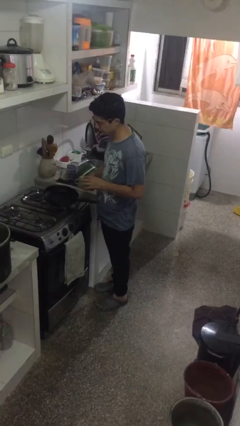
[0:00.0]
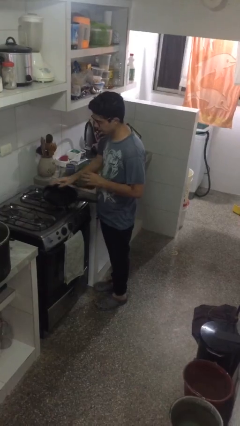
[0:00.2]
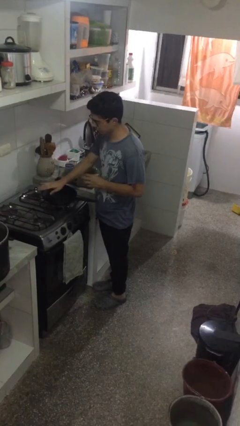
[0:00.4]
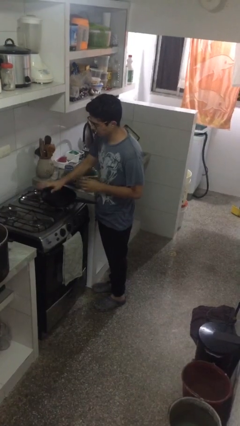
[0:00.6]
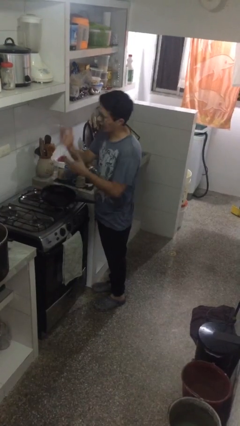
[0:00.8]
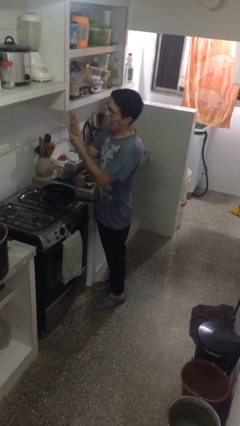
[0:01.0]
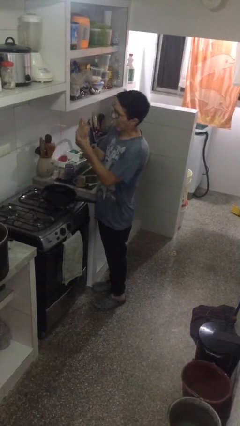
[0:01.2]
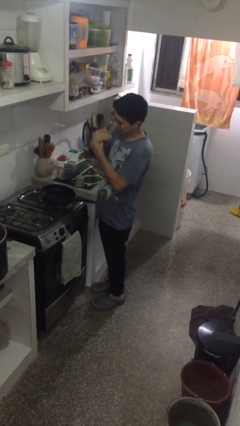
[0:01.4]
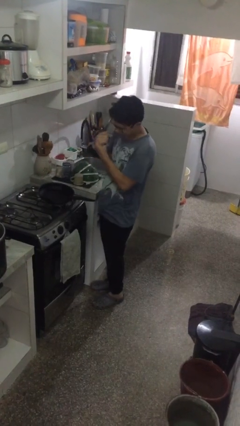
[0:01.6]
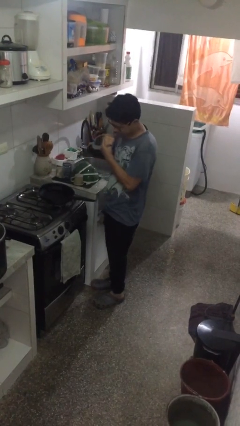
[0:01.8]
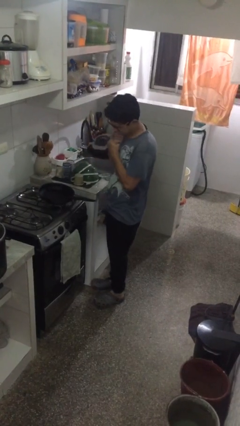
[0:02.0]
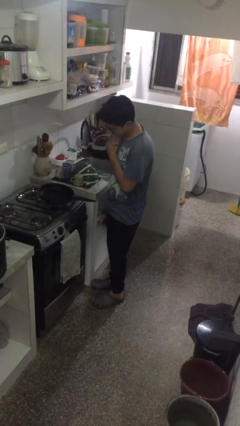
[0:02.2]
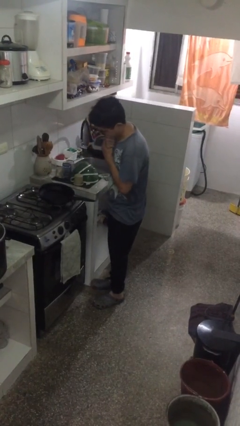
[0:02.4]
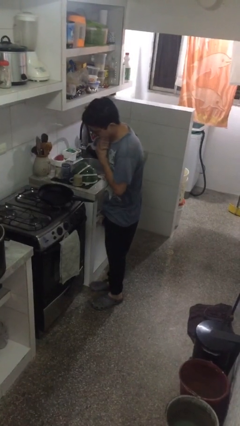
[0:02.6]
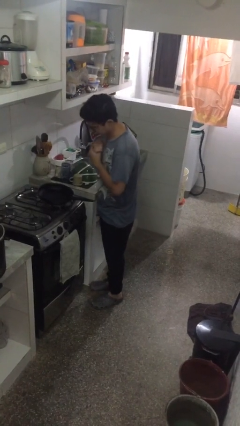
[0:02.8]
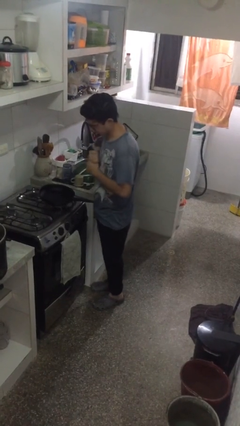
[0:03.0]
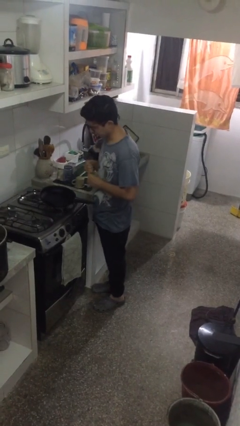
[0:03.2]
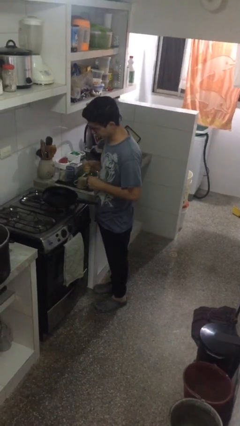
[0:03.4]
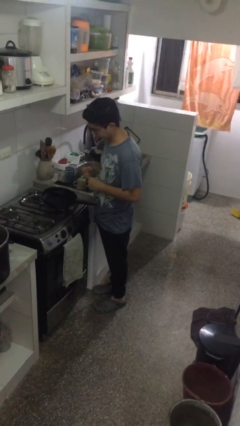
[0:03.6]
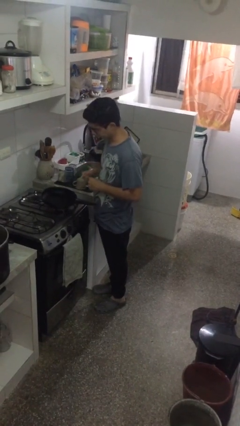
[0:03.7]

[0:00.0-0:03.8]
person burns hand

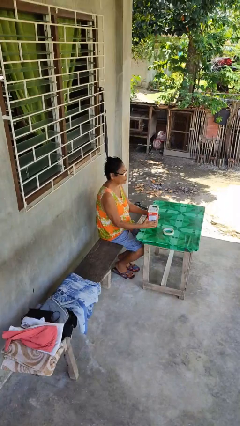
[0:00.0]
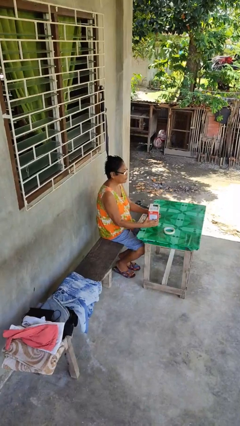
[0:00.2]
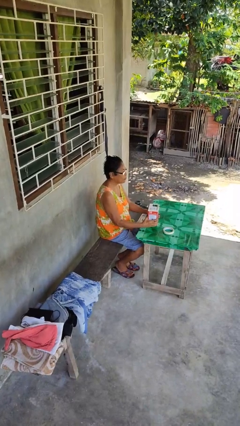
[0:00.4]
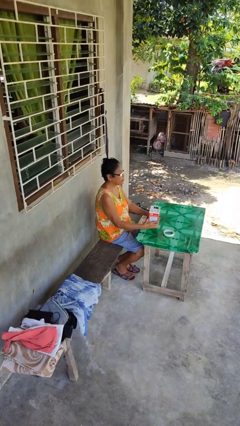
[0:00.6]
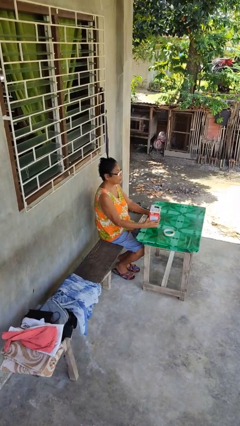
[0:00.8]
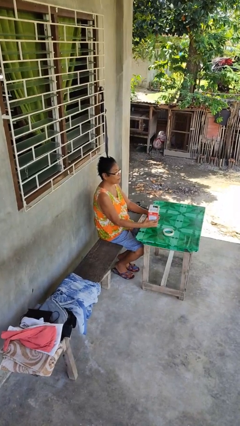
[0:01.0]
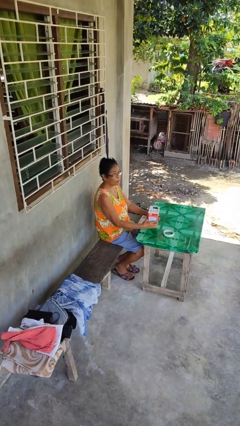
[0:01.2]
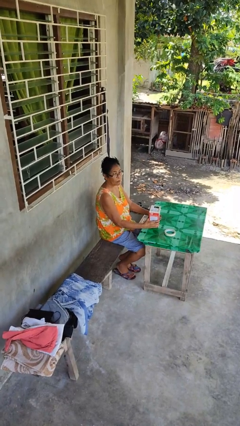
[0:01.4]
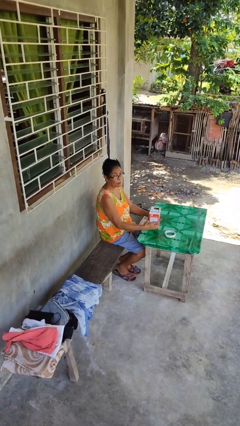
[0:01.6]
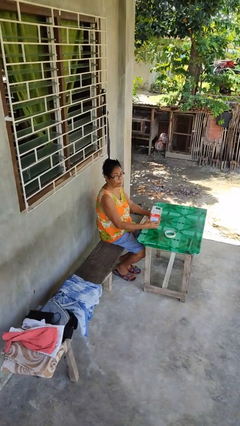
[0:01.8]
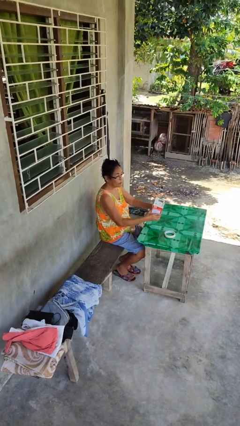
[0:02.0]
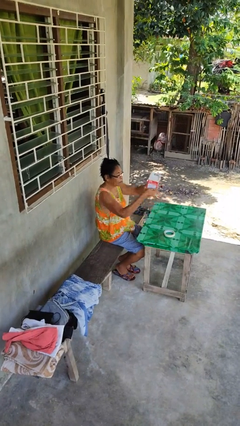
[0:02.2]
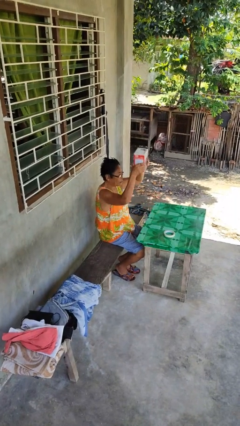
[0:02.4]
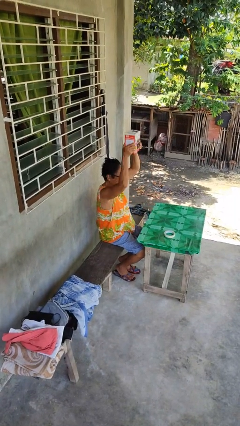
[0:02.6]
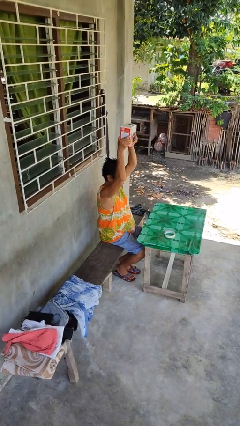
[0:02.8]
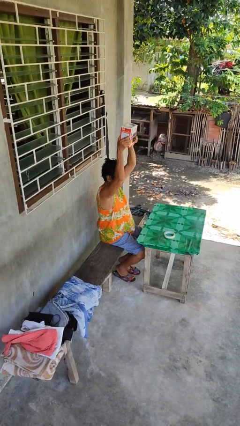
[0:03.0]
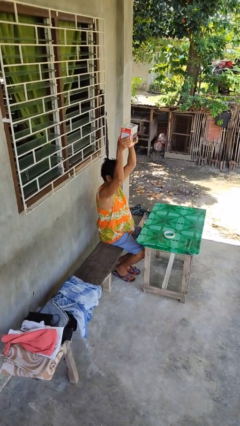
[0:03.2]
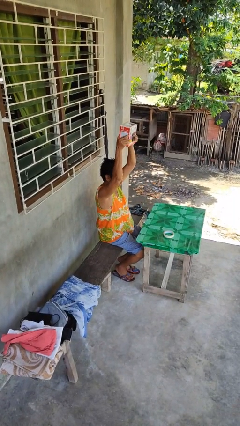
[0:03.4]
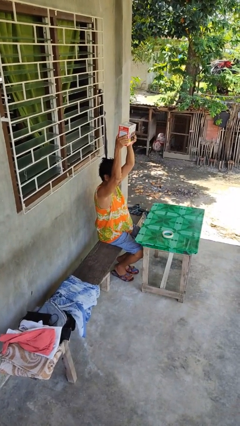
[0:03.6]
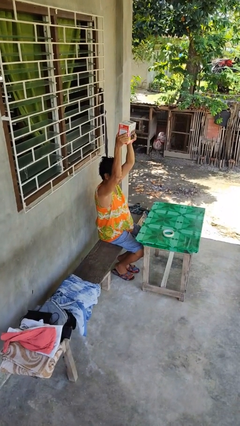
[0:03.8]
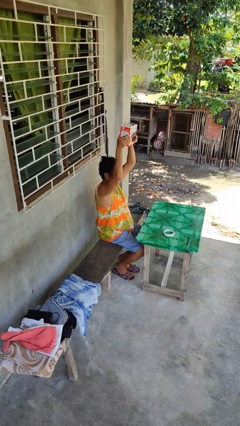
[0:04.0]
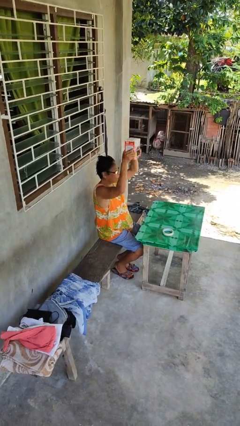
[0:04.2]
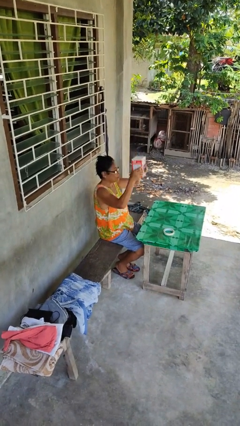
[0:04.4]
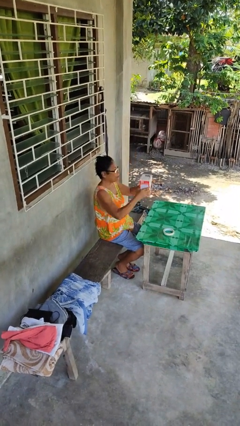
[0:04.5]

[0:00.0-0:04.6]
person holds object above head

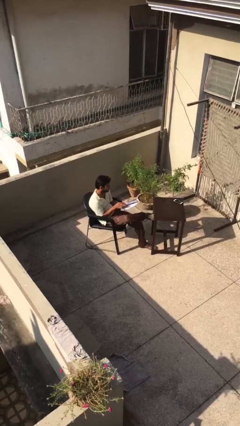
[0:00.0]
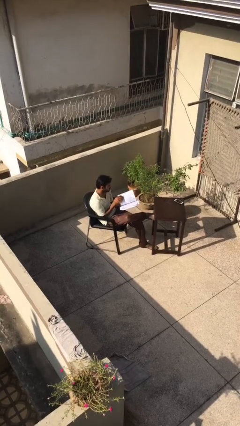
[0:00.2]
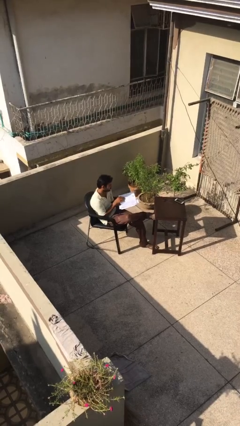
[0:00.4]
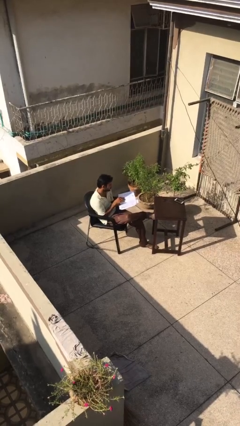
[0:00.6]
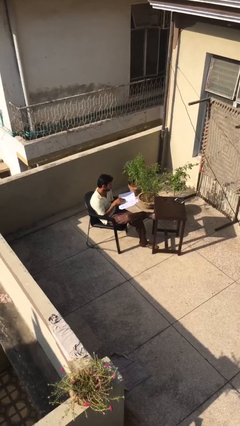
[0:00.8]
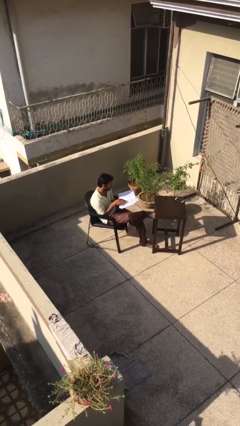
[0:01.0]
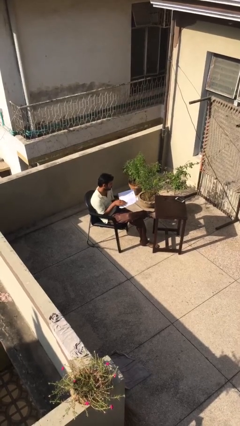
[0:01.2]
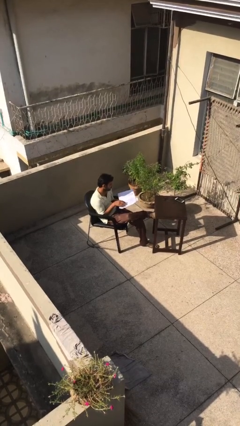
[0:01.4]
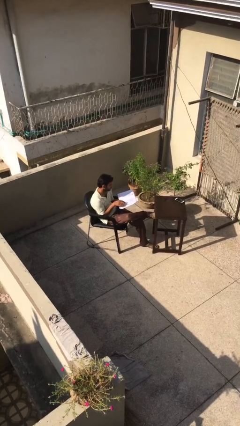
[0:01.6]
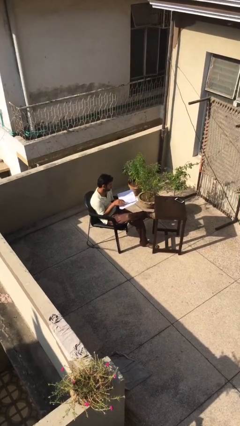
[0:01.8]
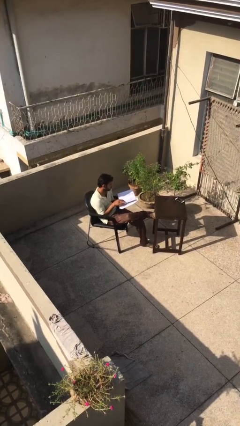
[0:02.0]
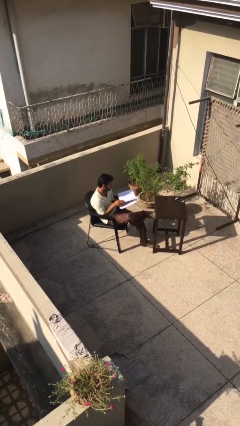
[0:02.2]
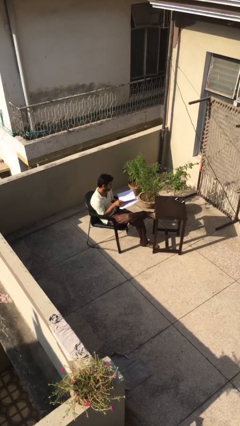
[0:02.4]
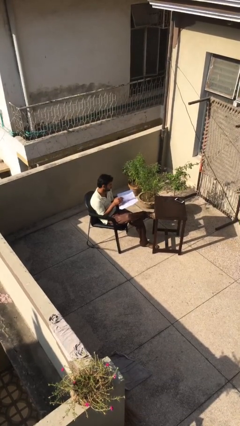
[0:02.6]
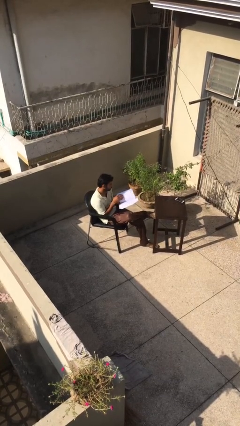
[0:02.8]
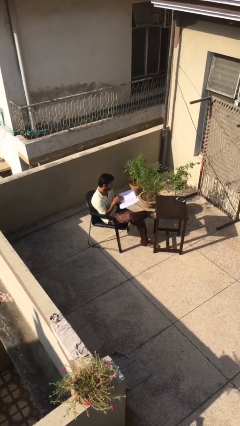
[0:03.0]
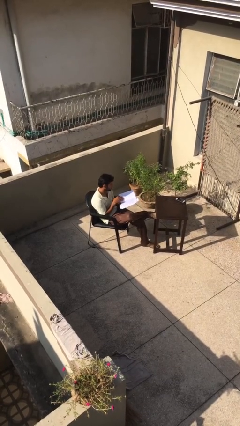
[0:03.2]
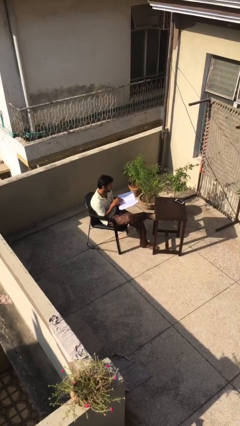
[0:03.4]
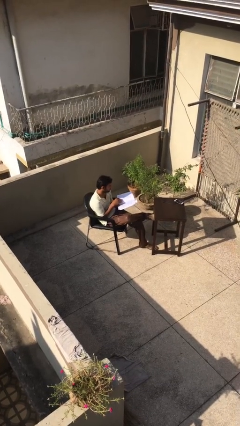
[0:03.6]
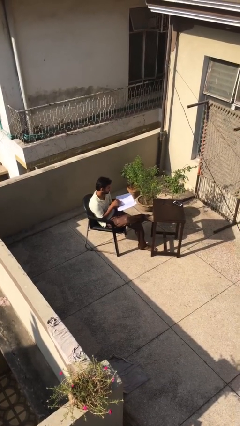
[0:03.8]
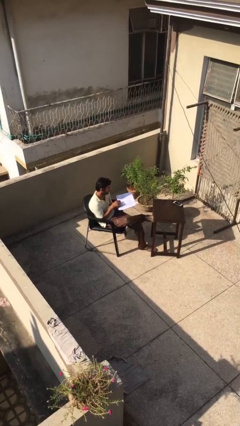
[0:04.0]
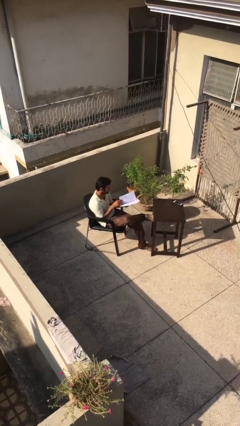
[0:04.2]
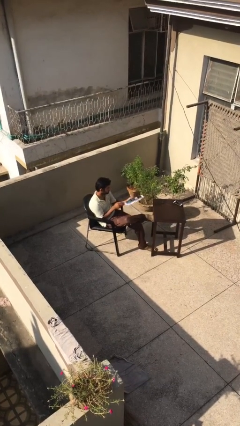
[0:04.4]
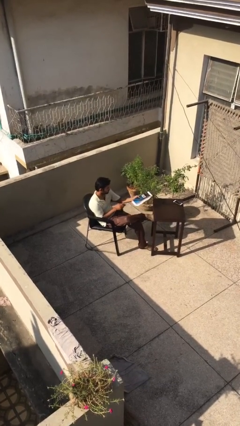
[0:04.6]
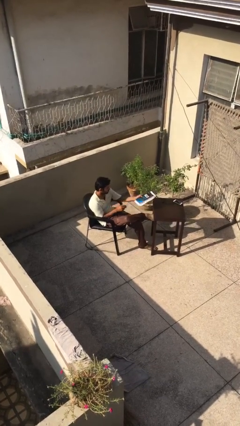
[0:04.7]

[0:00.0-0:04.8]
person reads document

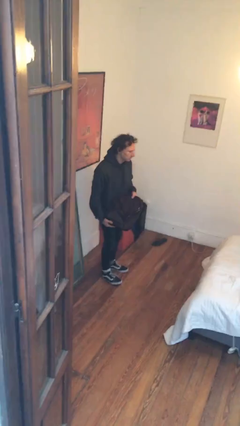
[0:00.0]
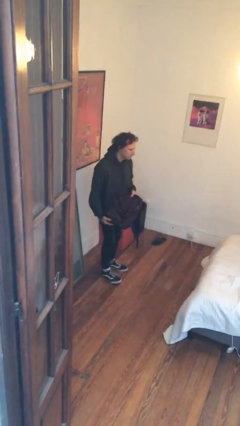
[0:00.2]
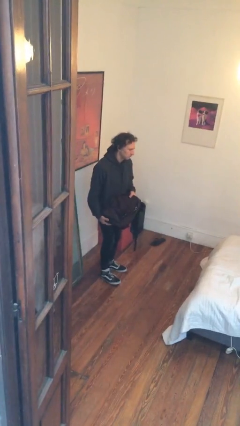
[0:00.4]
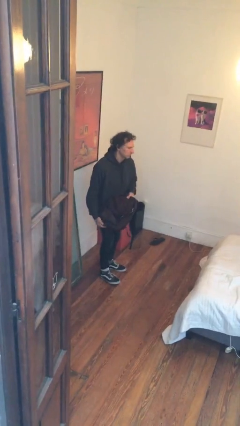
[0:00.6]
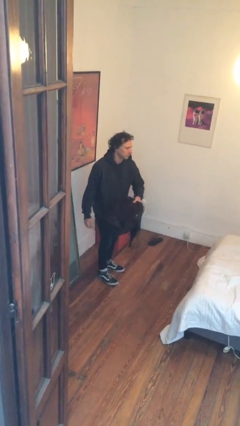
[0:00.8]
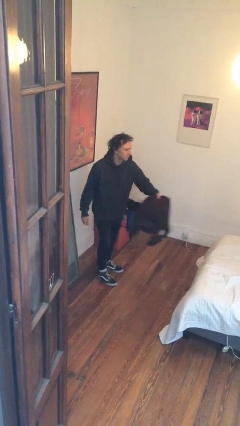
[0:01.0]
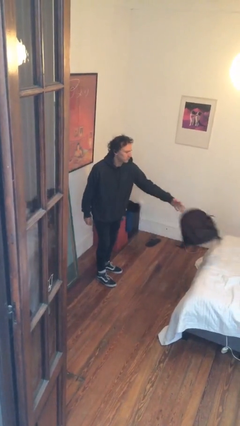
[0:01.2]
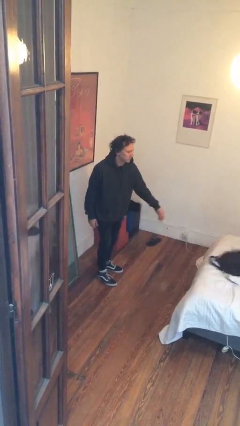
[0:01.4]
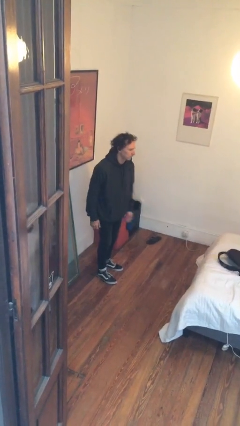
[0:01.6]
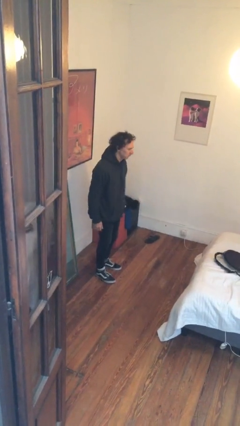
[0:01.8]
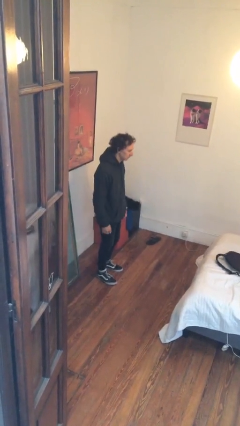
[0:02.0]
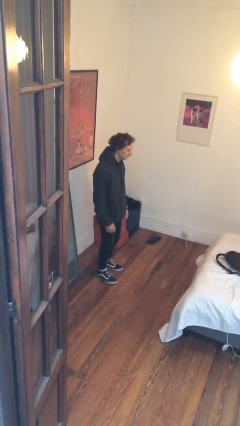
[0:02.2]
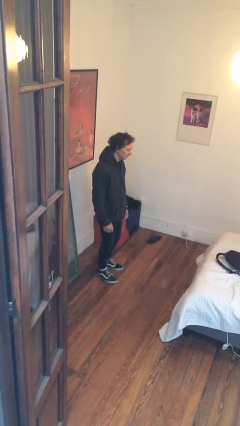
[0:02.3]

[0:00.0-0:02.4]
person throws object on bed

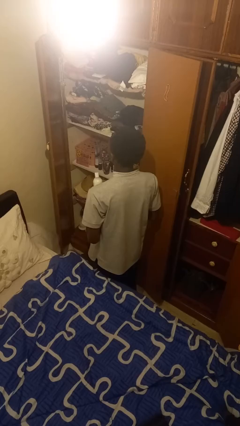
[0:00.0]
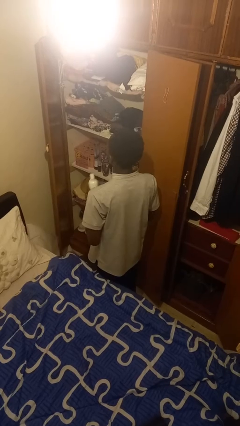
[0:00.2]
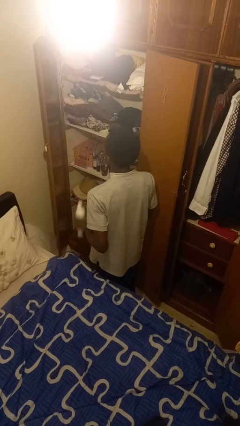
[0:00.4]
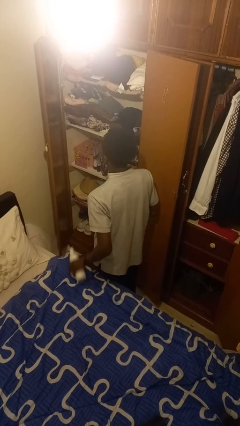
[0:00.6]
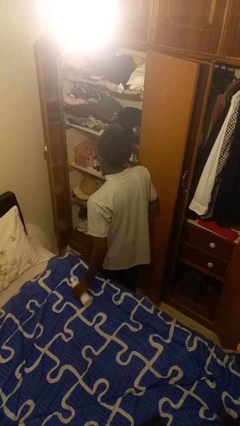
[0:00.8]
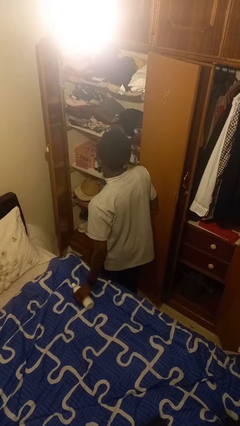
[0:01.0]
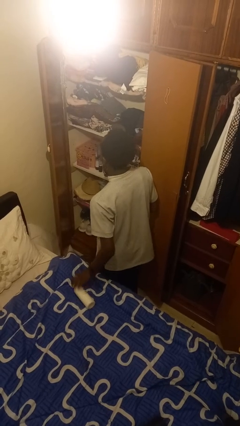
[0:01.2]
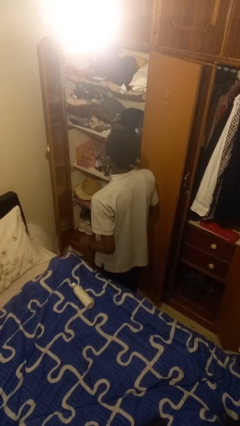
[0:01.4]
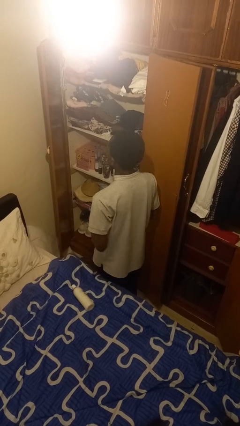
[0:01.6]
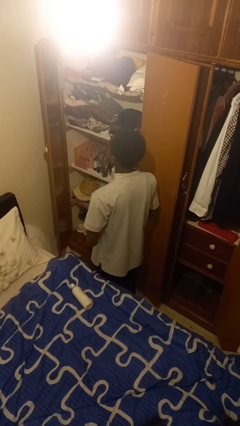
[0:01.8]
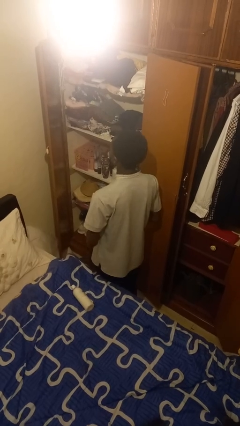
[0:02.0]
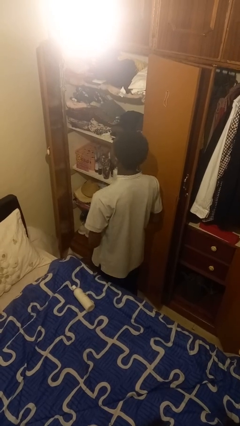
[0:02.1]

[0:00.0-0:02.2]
person puts down object on bed
